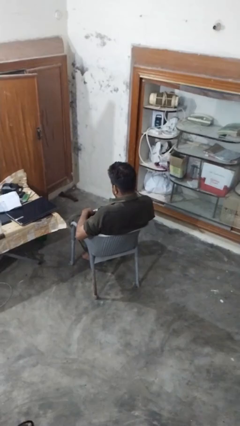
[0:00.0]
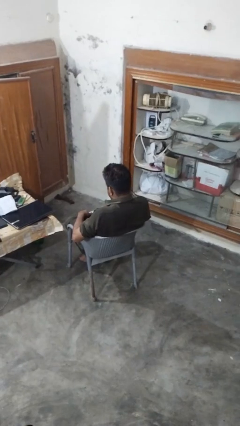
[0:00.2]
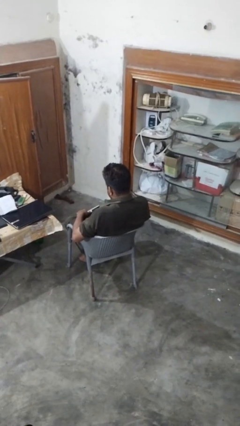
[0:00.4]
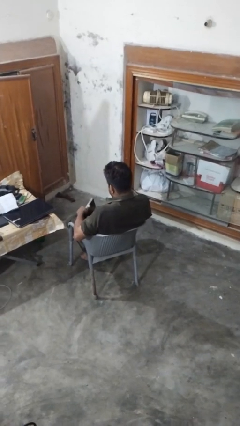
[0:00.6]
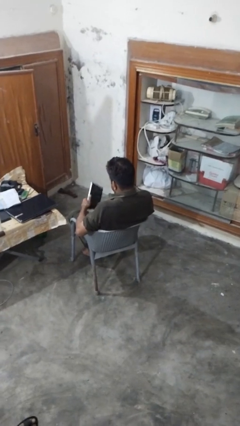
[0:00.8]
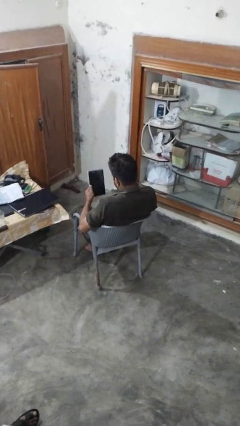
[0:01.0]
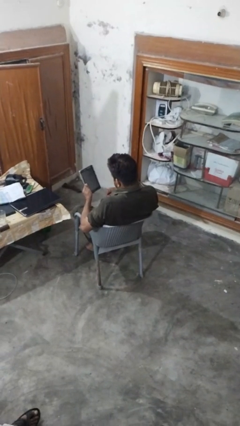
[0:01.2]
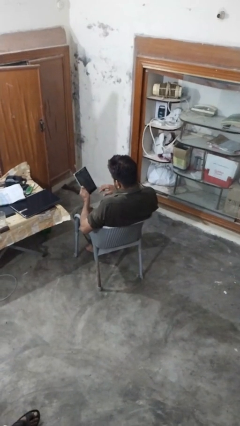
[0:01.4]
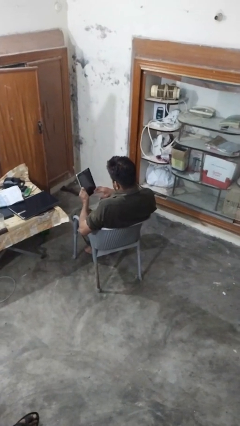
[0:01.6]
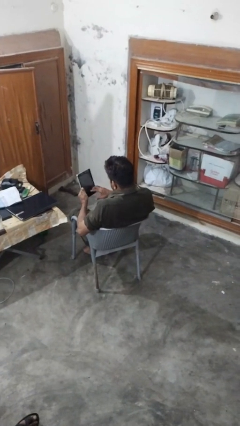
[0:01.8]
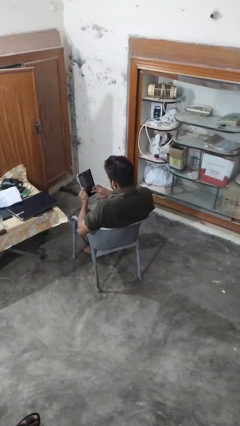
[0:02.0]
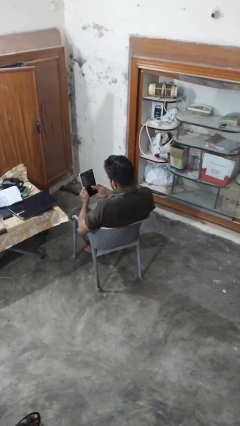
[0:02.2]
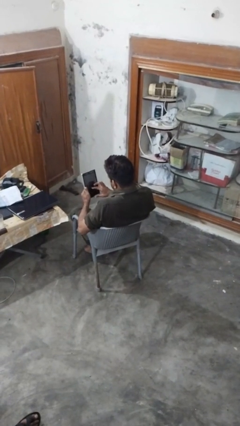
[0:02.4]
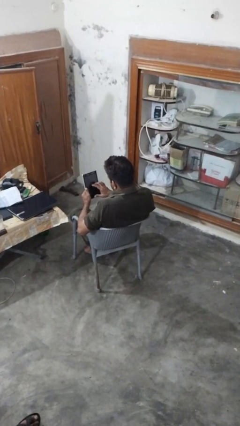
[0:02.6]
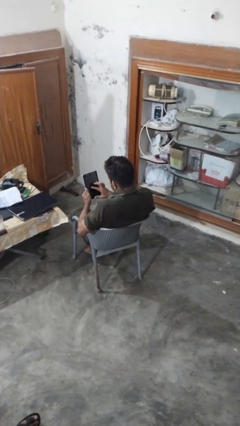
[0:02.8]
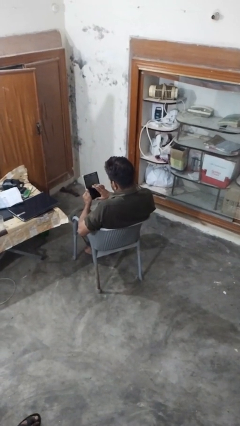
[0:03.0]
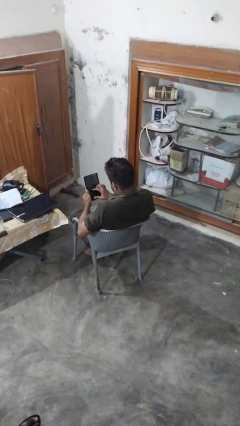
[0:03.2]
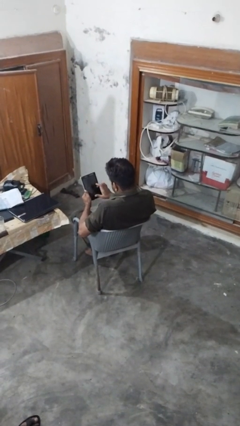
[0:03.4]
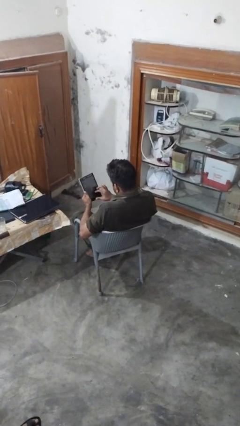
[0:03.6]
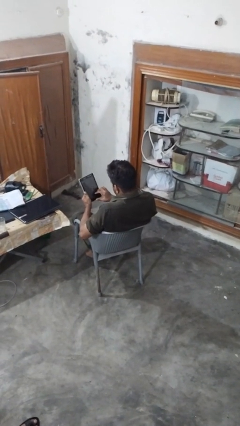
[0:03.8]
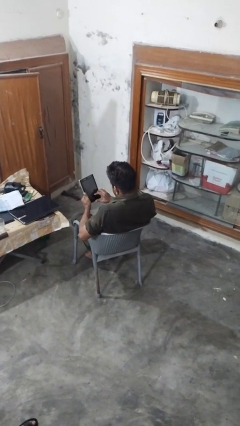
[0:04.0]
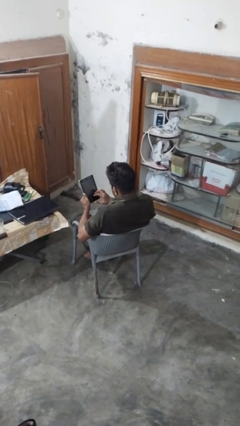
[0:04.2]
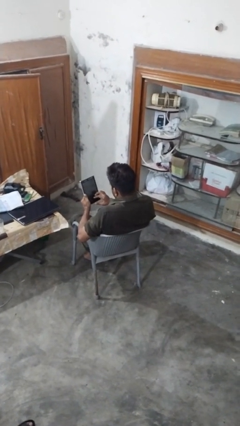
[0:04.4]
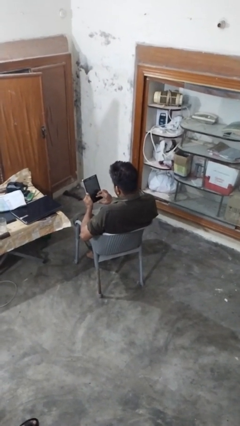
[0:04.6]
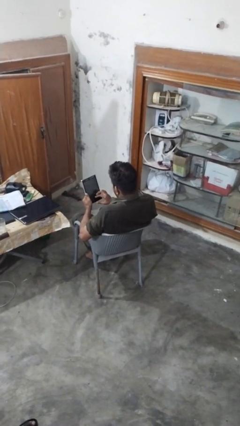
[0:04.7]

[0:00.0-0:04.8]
person interacts with tablet

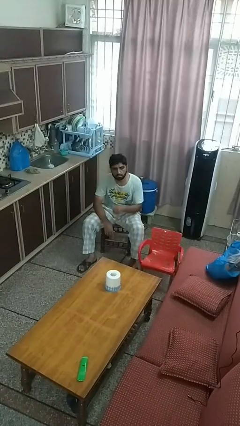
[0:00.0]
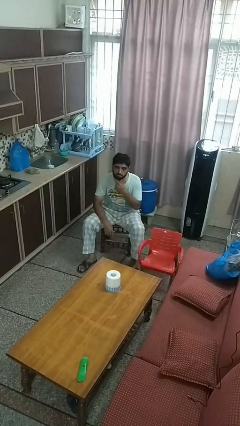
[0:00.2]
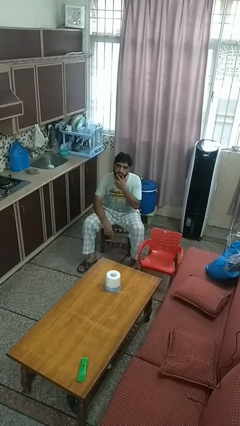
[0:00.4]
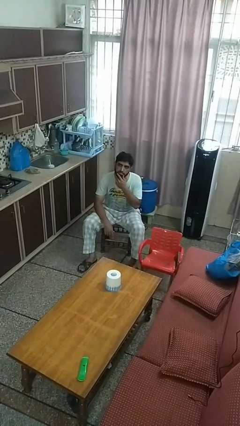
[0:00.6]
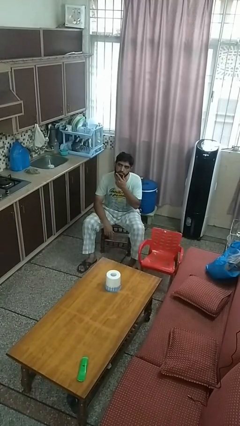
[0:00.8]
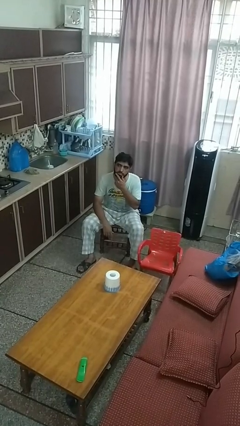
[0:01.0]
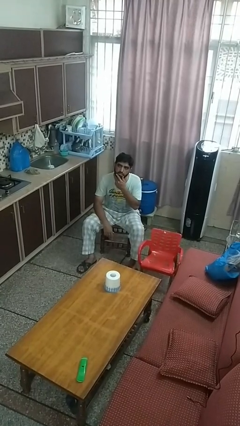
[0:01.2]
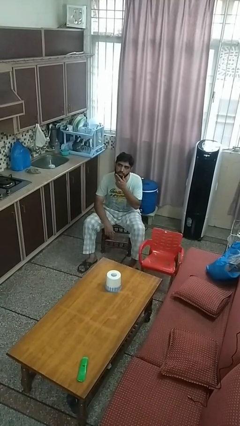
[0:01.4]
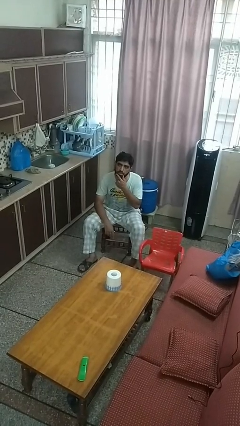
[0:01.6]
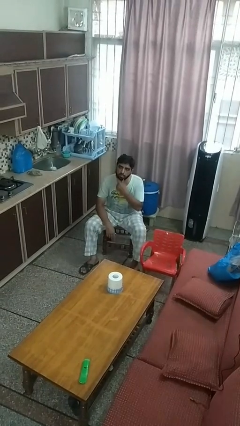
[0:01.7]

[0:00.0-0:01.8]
person strokes chin

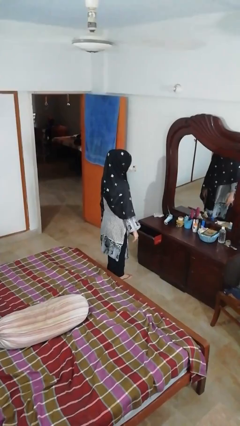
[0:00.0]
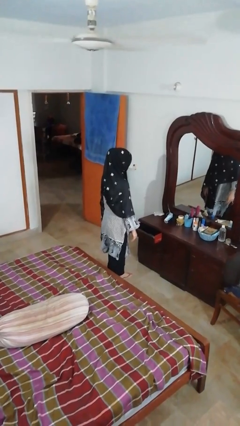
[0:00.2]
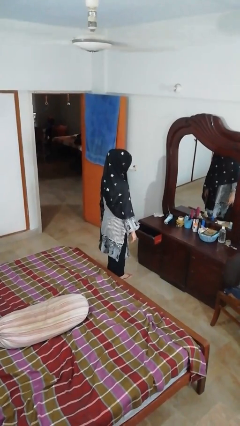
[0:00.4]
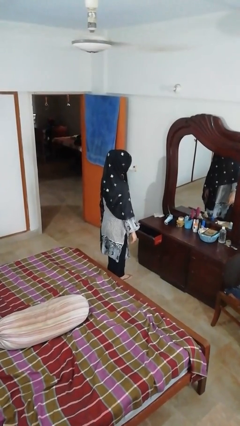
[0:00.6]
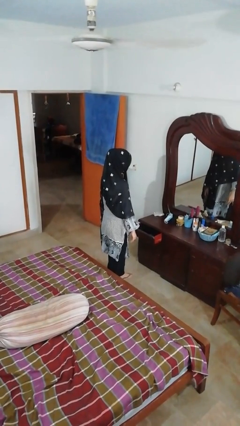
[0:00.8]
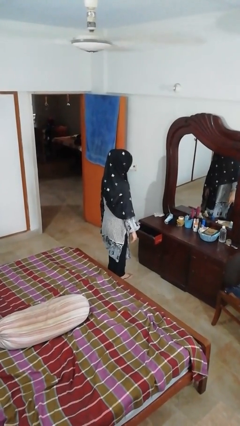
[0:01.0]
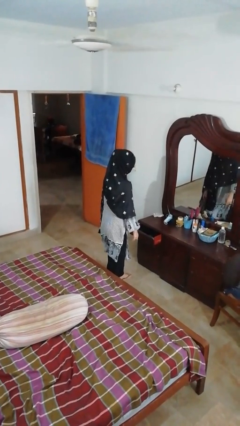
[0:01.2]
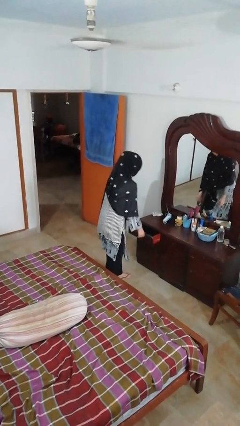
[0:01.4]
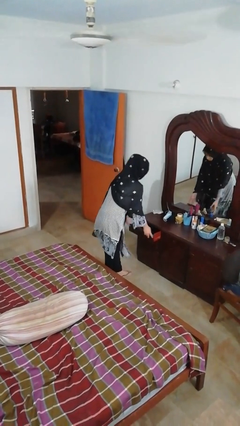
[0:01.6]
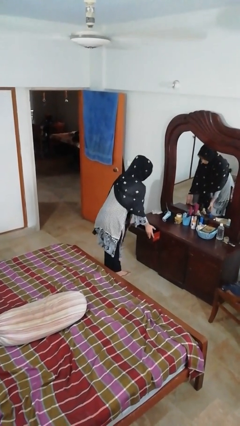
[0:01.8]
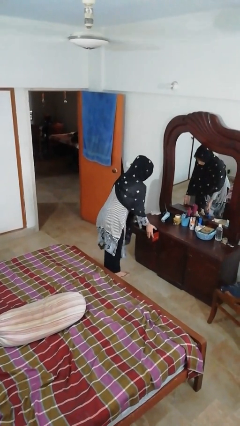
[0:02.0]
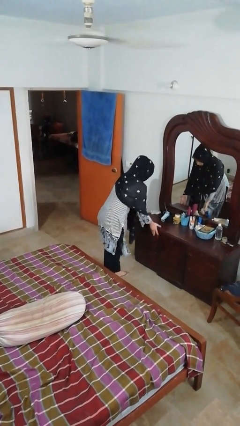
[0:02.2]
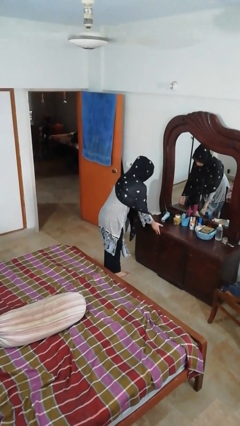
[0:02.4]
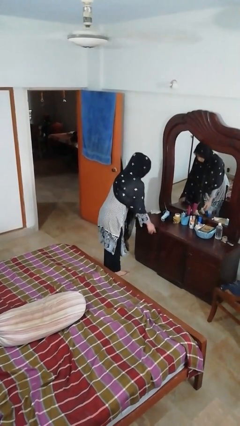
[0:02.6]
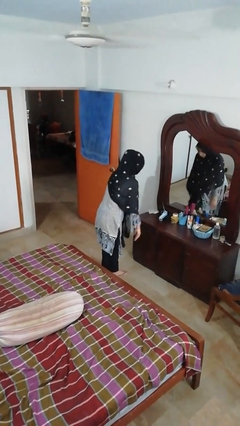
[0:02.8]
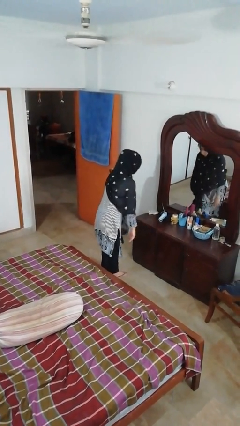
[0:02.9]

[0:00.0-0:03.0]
person closes dresser drawer

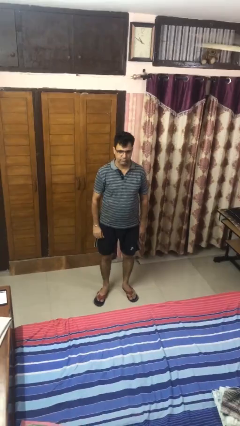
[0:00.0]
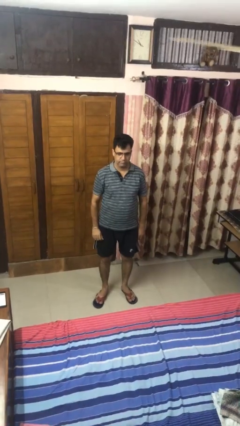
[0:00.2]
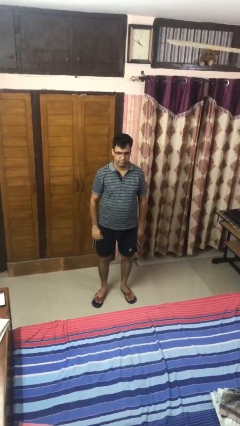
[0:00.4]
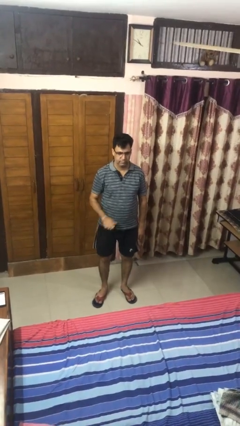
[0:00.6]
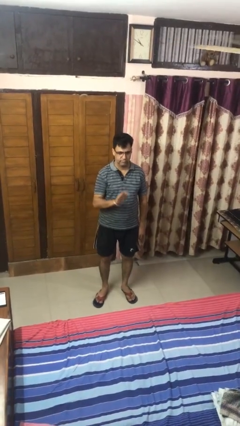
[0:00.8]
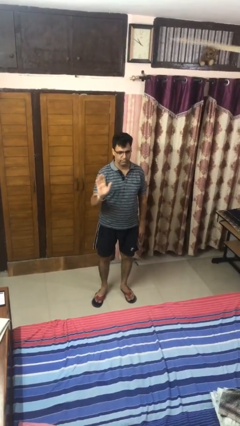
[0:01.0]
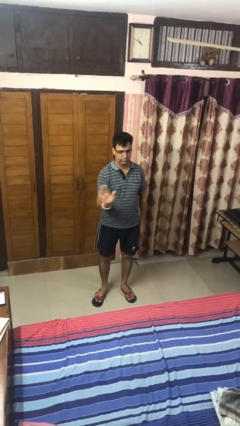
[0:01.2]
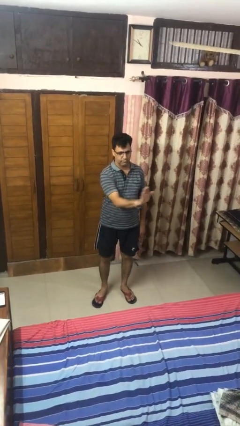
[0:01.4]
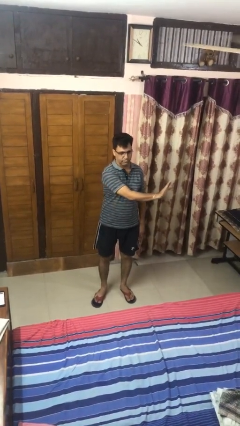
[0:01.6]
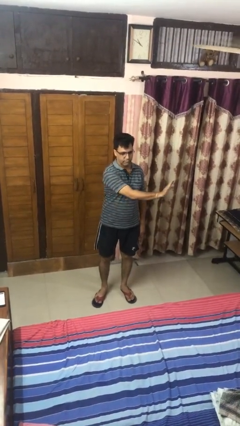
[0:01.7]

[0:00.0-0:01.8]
person gestures swipe left

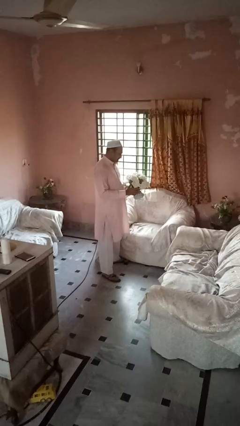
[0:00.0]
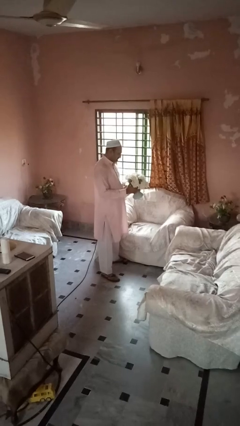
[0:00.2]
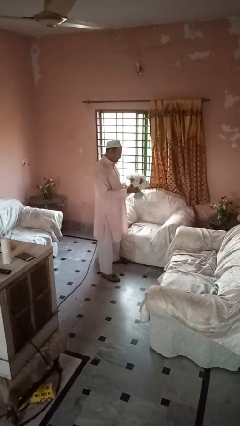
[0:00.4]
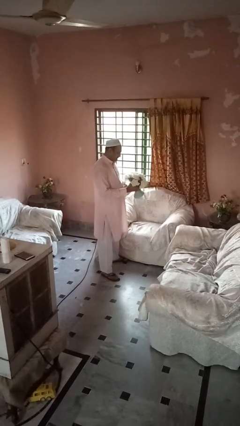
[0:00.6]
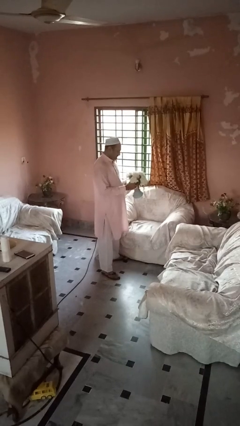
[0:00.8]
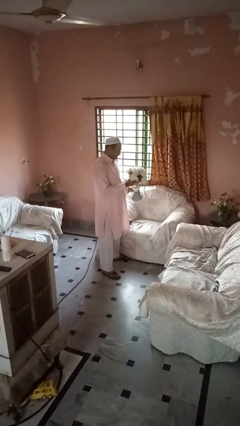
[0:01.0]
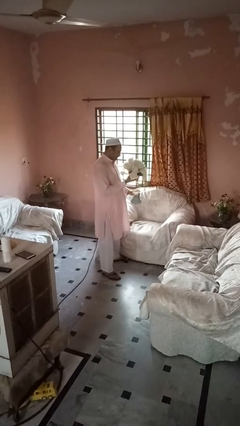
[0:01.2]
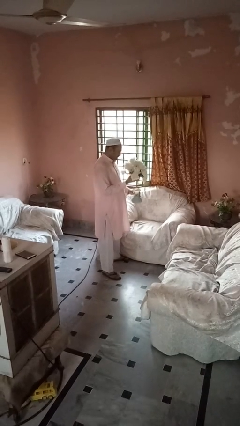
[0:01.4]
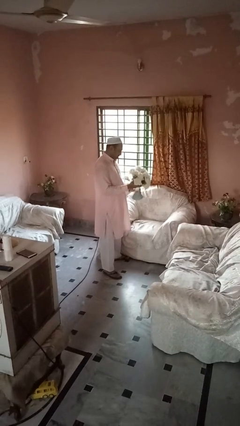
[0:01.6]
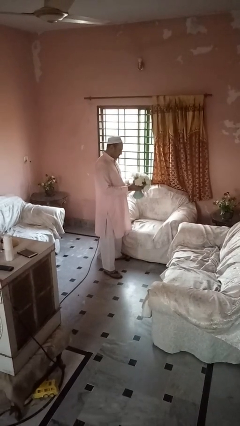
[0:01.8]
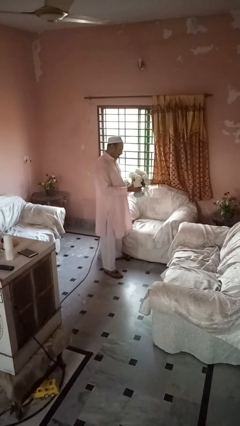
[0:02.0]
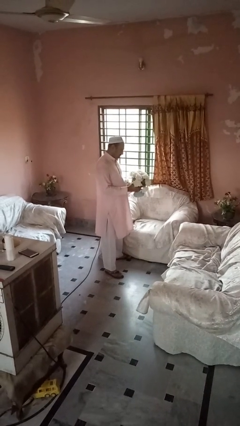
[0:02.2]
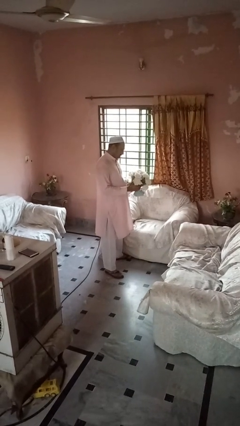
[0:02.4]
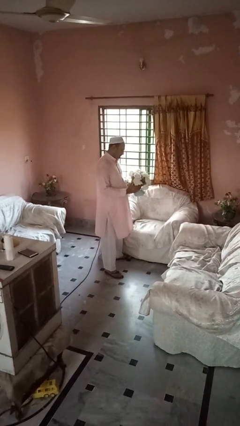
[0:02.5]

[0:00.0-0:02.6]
person arranges flowers in vase

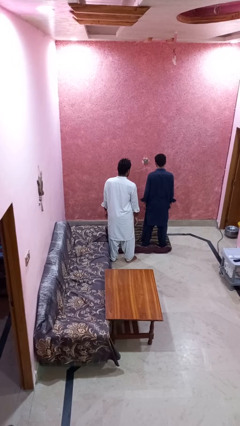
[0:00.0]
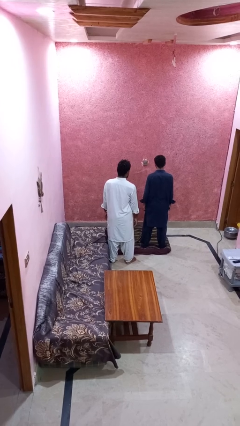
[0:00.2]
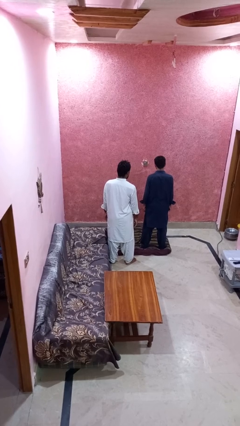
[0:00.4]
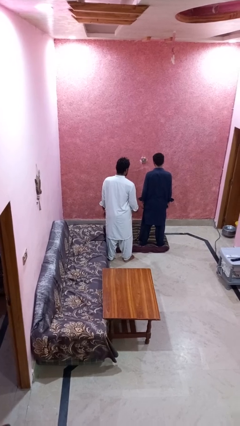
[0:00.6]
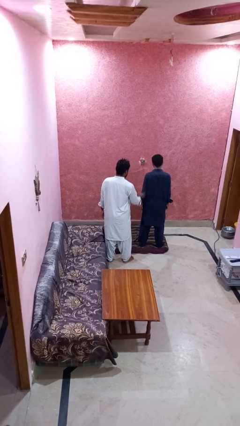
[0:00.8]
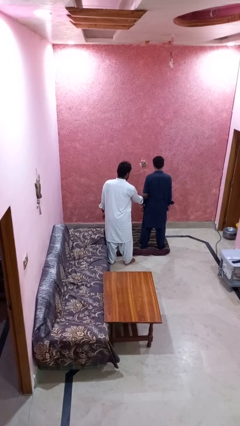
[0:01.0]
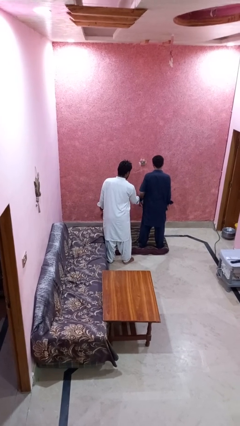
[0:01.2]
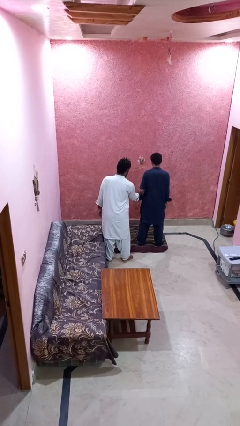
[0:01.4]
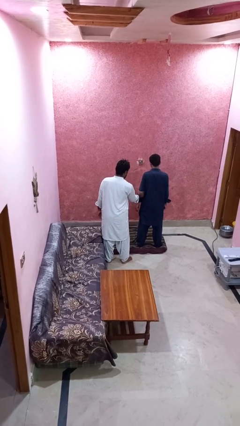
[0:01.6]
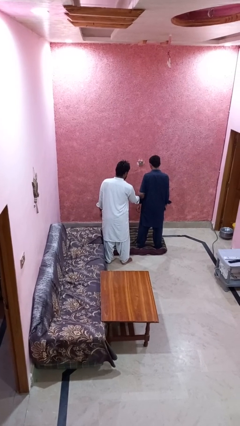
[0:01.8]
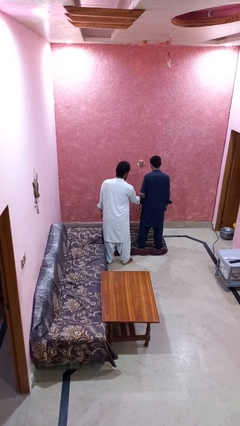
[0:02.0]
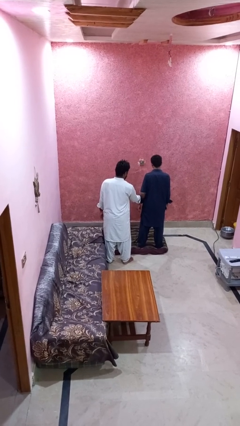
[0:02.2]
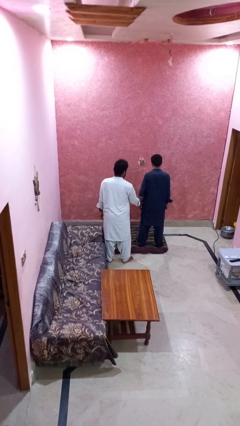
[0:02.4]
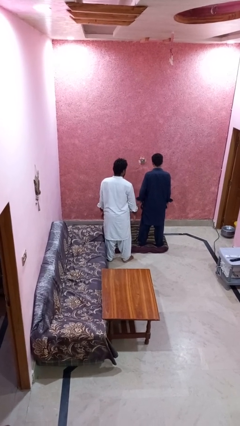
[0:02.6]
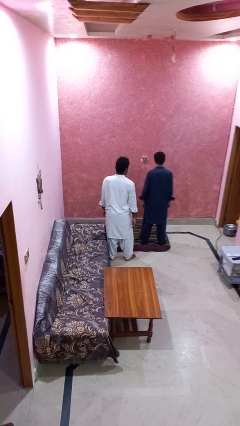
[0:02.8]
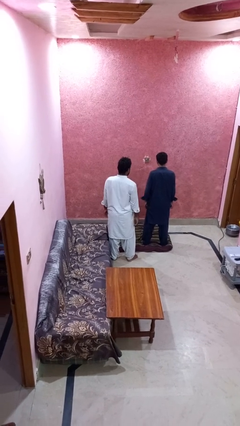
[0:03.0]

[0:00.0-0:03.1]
person grabs person by bicep

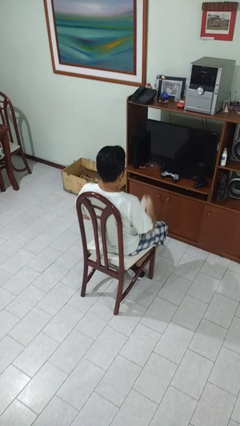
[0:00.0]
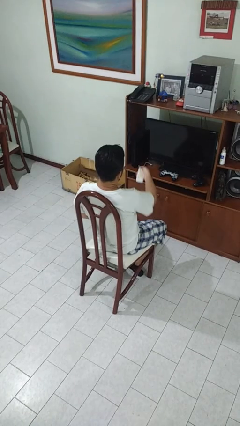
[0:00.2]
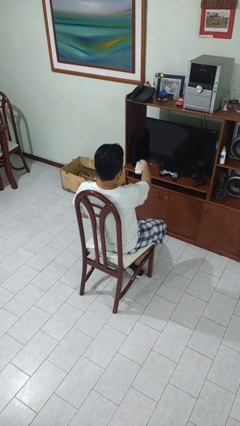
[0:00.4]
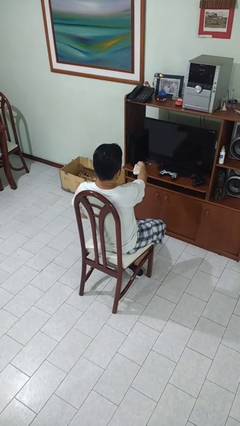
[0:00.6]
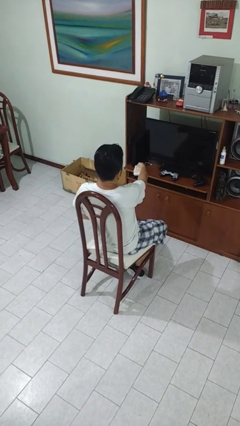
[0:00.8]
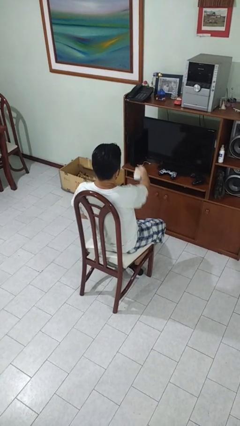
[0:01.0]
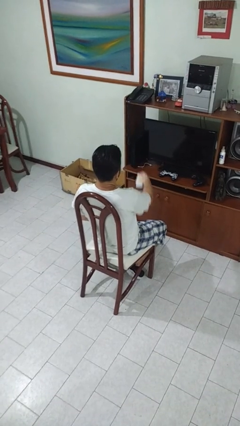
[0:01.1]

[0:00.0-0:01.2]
person uses television remote
